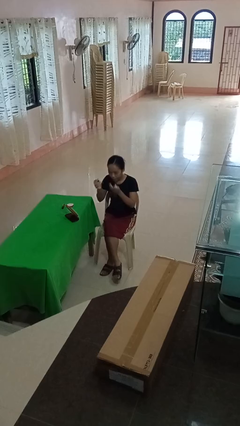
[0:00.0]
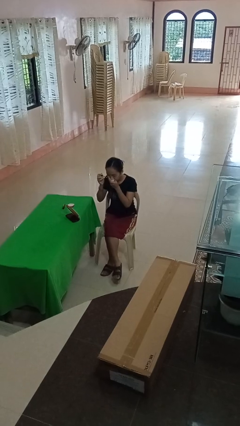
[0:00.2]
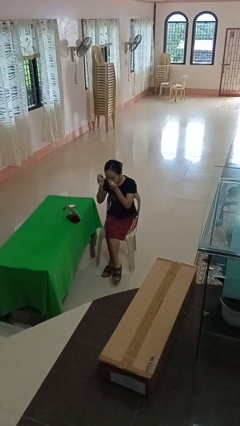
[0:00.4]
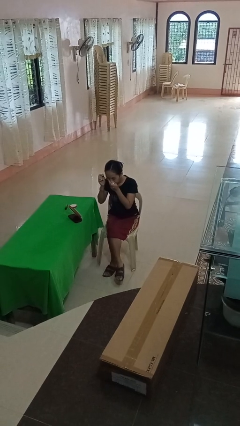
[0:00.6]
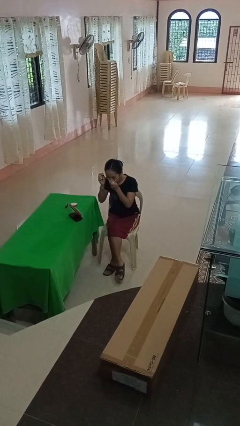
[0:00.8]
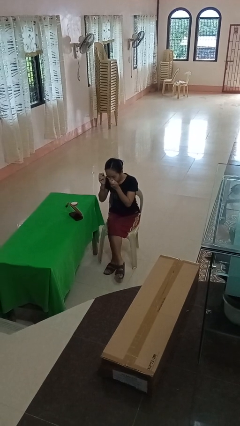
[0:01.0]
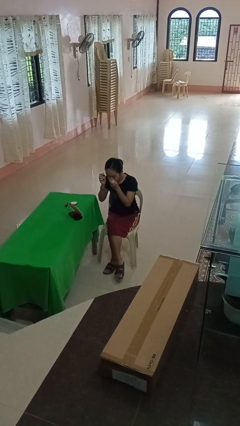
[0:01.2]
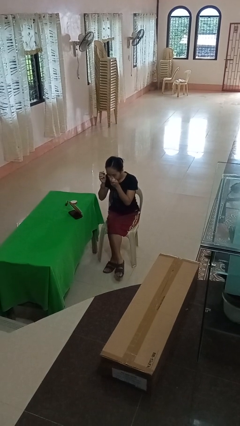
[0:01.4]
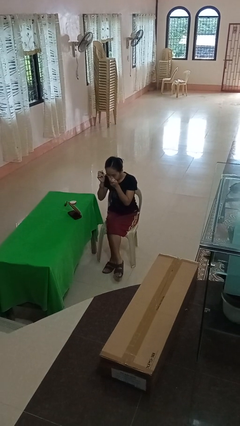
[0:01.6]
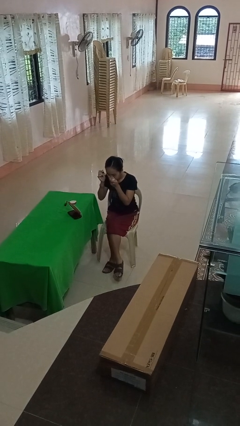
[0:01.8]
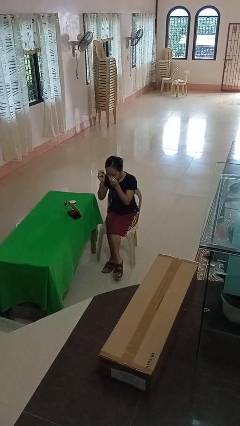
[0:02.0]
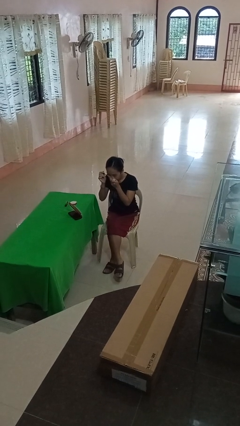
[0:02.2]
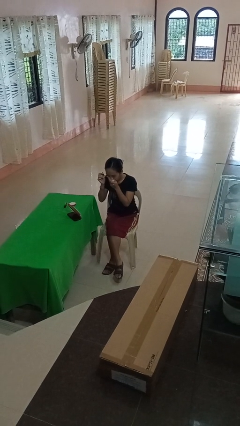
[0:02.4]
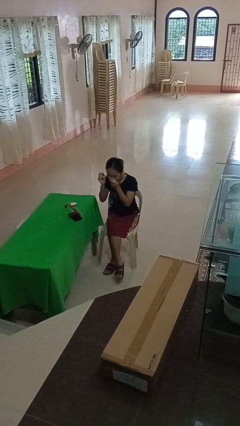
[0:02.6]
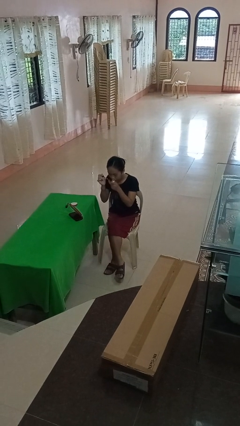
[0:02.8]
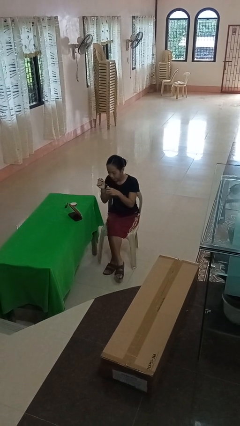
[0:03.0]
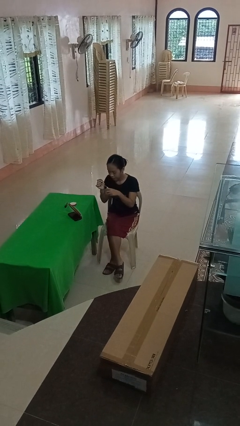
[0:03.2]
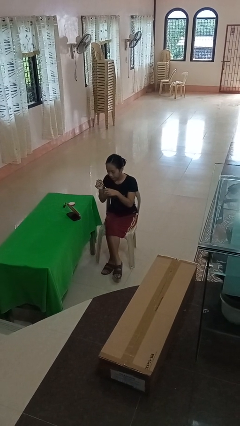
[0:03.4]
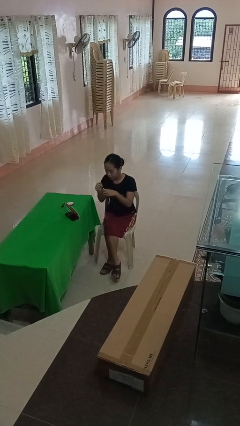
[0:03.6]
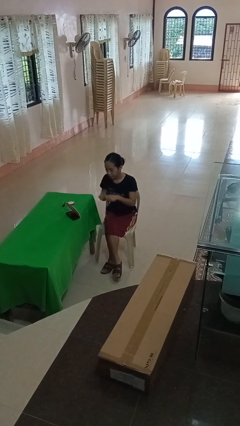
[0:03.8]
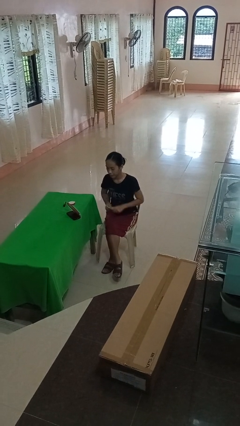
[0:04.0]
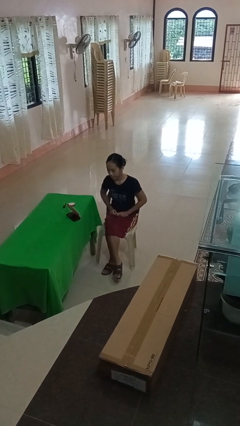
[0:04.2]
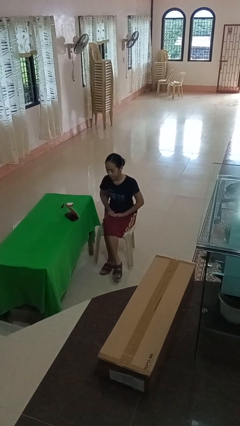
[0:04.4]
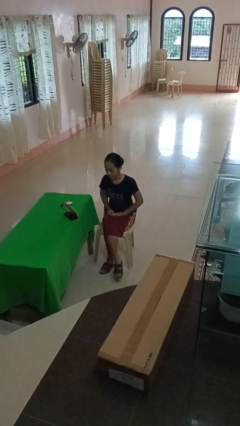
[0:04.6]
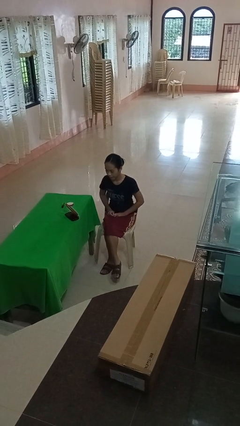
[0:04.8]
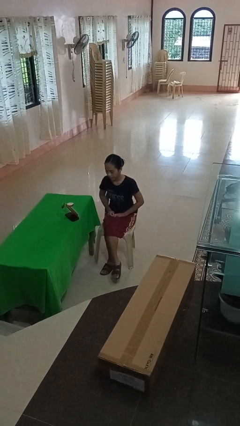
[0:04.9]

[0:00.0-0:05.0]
person applies eye makeup

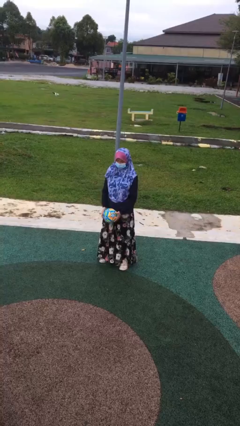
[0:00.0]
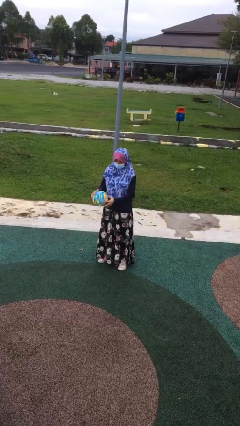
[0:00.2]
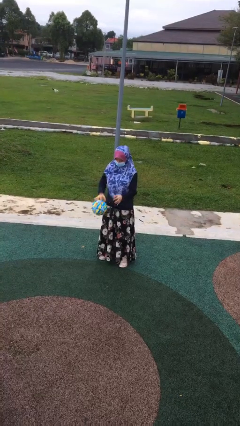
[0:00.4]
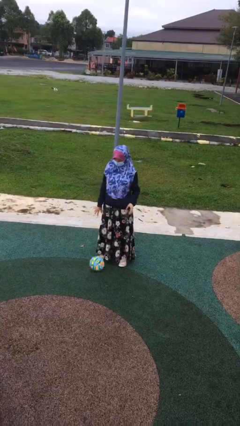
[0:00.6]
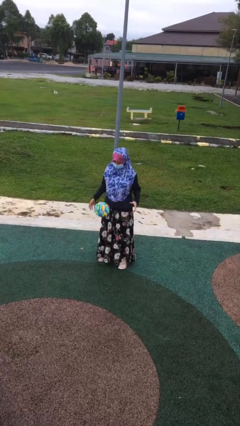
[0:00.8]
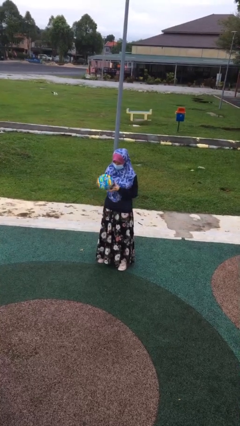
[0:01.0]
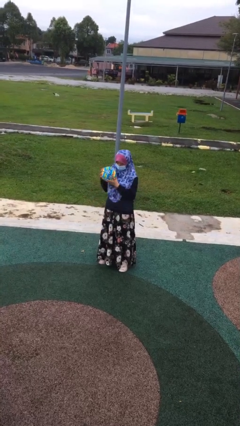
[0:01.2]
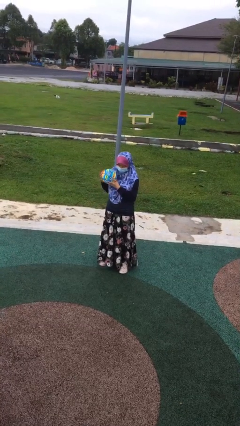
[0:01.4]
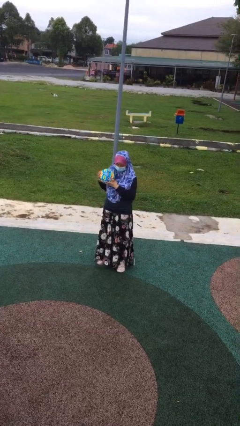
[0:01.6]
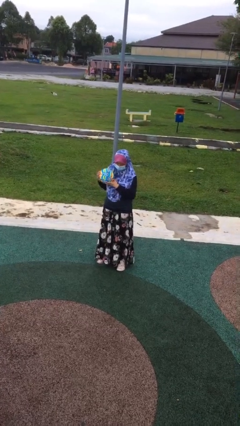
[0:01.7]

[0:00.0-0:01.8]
person bounces ball on floor

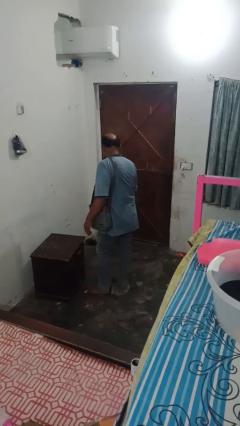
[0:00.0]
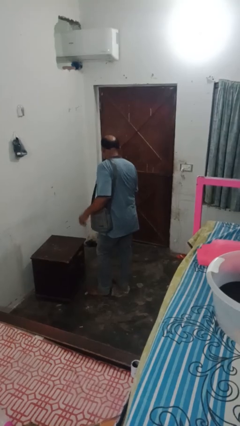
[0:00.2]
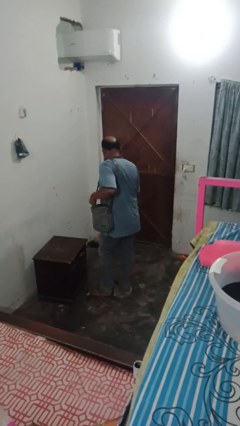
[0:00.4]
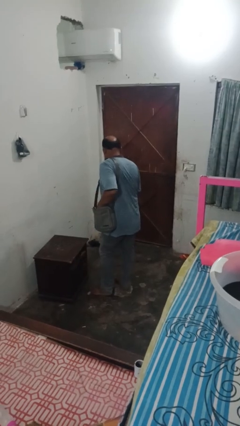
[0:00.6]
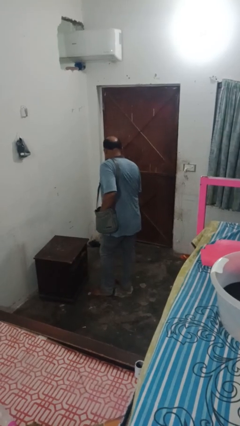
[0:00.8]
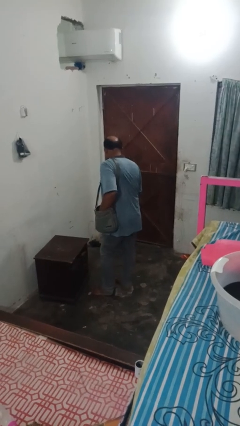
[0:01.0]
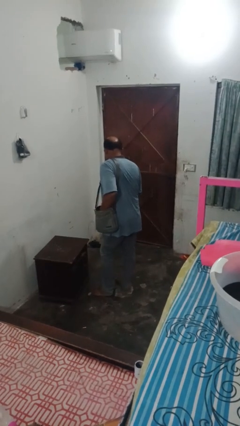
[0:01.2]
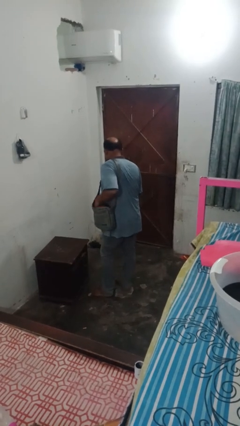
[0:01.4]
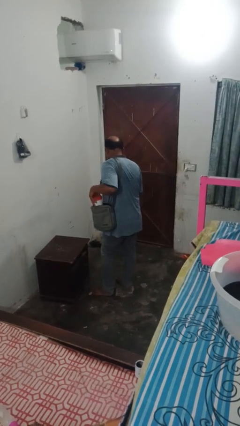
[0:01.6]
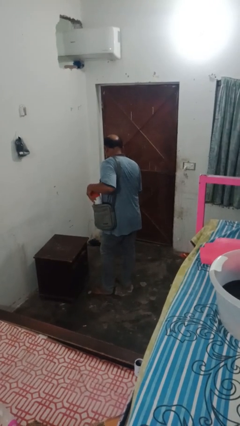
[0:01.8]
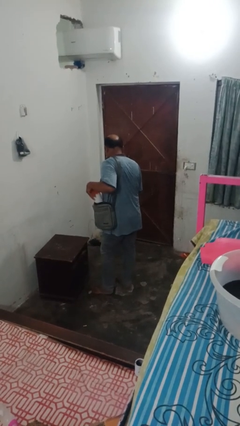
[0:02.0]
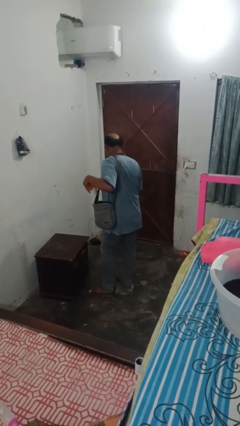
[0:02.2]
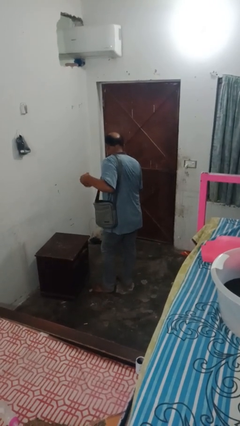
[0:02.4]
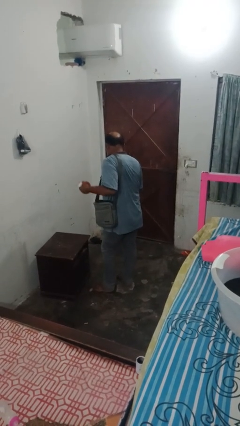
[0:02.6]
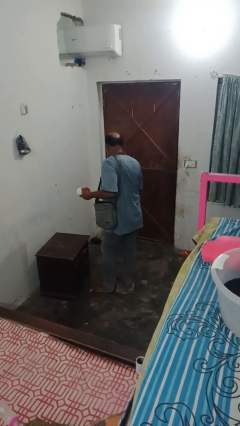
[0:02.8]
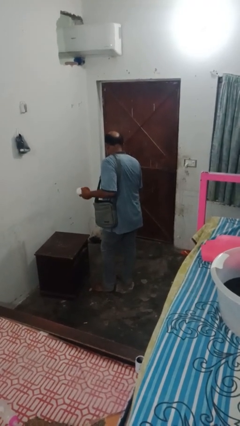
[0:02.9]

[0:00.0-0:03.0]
person takes object from bag

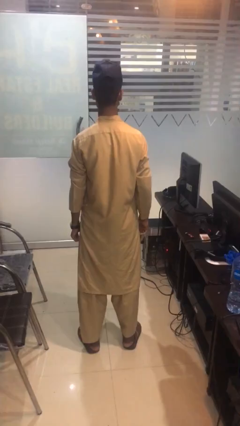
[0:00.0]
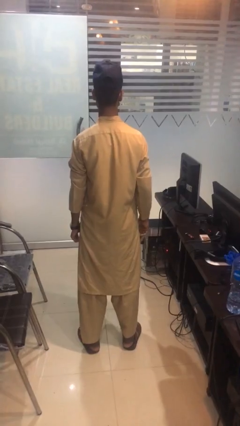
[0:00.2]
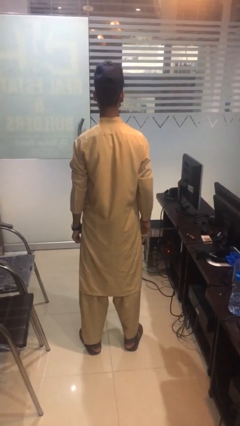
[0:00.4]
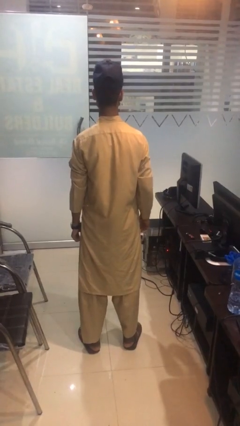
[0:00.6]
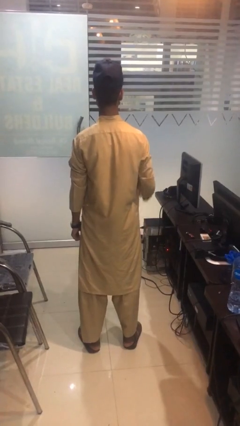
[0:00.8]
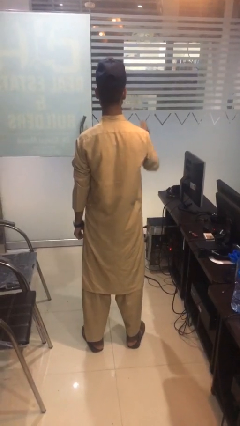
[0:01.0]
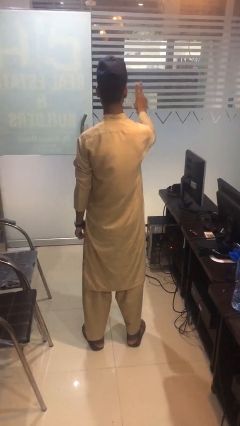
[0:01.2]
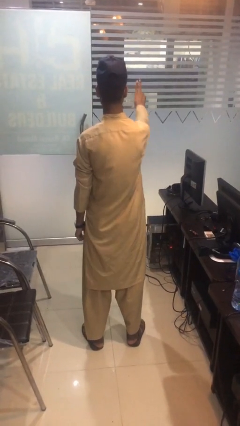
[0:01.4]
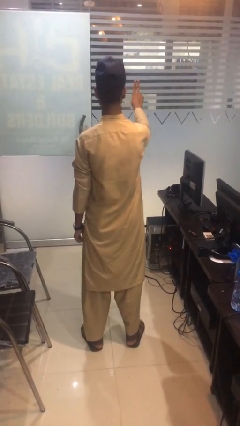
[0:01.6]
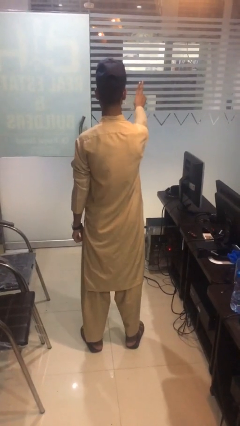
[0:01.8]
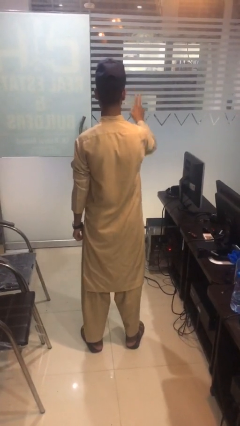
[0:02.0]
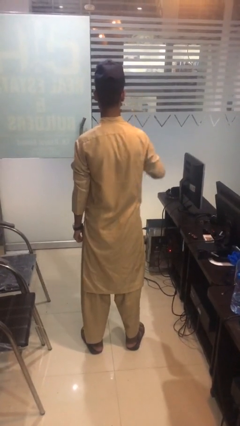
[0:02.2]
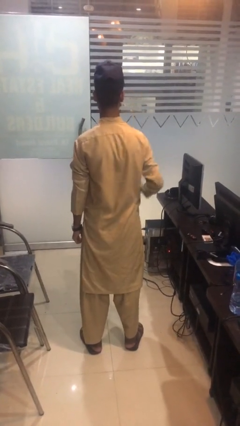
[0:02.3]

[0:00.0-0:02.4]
person gestures peace

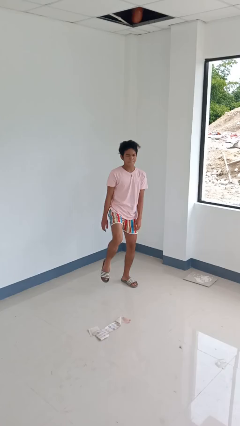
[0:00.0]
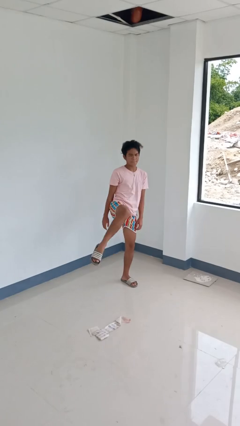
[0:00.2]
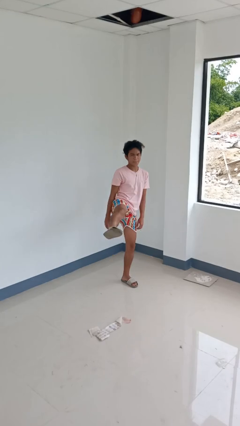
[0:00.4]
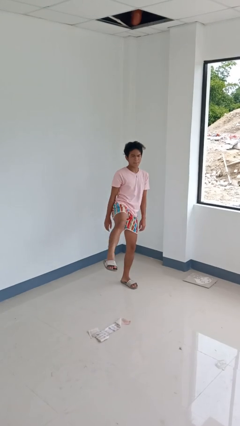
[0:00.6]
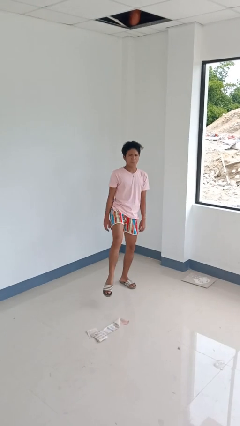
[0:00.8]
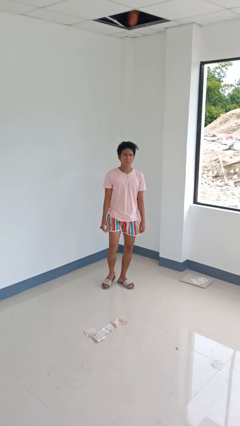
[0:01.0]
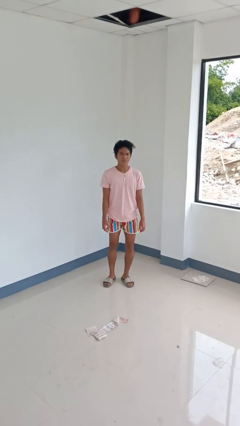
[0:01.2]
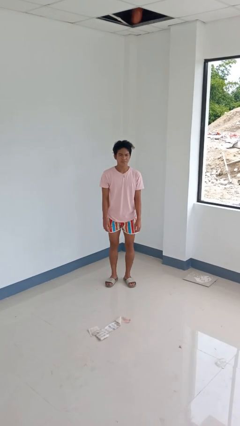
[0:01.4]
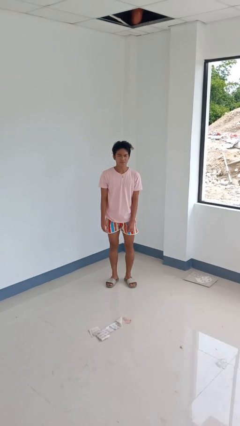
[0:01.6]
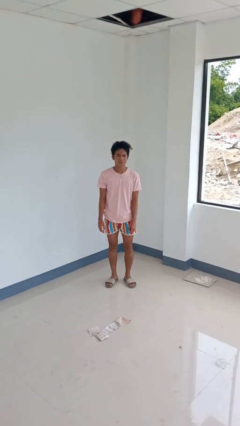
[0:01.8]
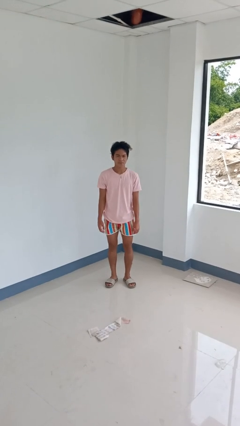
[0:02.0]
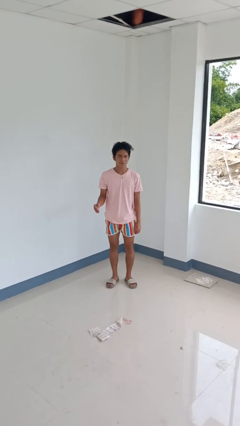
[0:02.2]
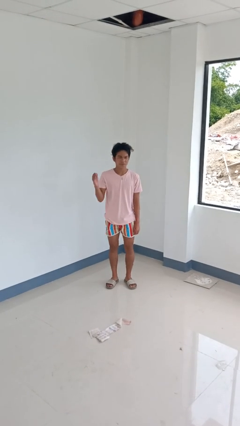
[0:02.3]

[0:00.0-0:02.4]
person karate kicks

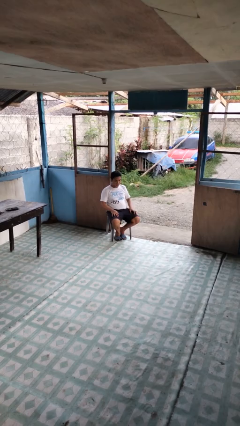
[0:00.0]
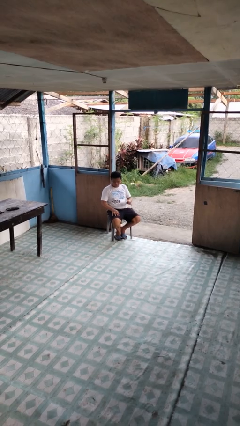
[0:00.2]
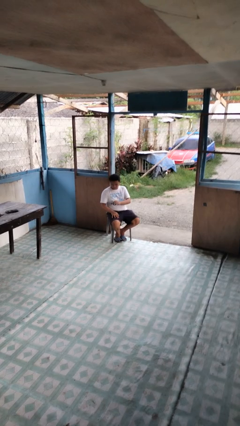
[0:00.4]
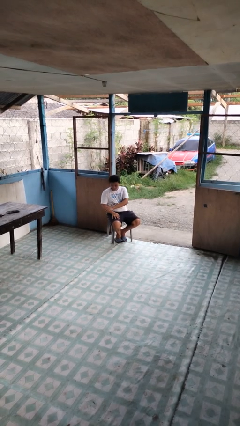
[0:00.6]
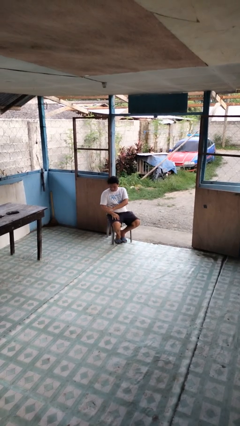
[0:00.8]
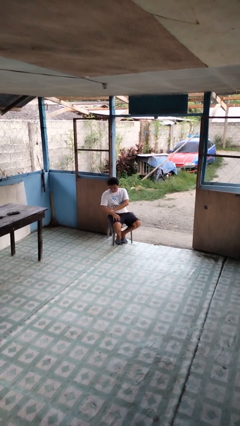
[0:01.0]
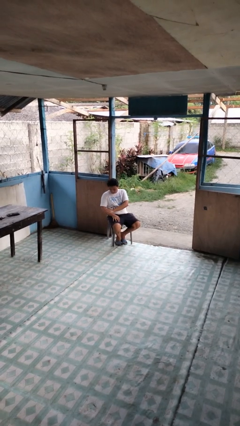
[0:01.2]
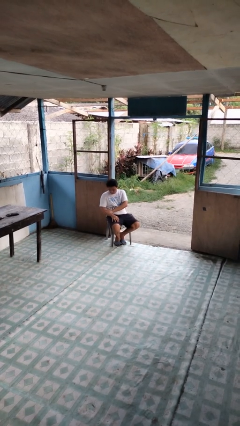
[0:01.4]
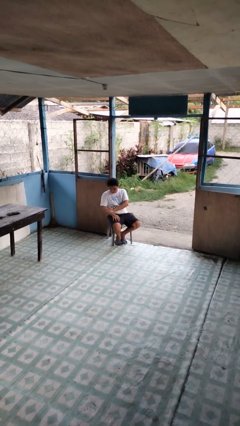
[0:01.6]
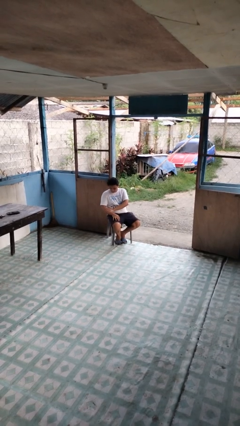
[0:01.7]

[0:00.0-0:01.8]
person swats bug

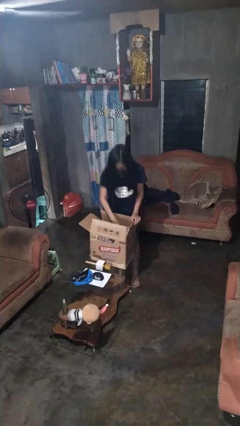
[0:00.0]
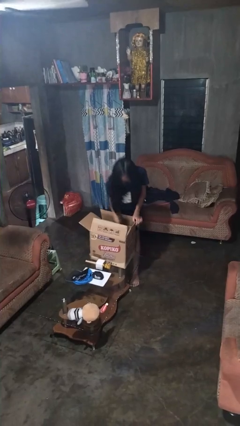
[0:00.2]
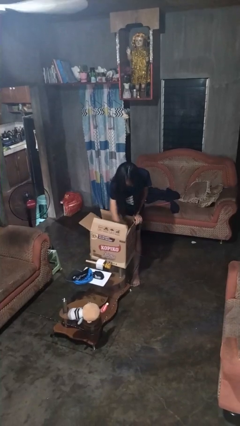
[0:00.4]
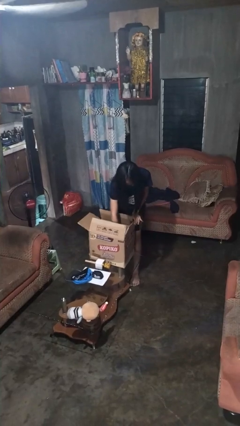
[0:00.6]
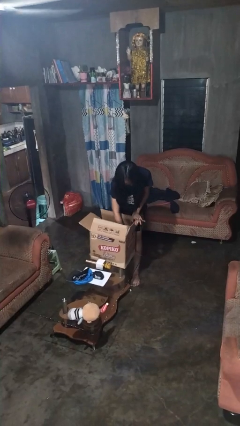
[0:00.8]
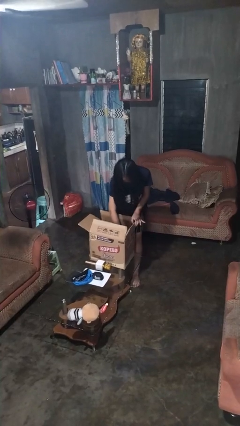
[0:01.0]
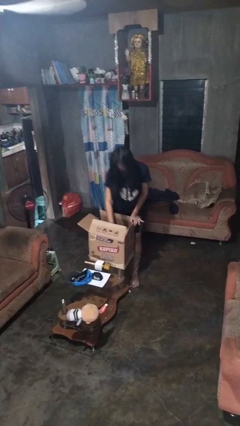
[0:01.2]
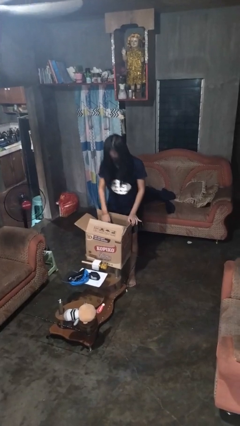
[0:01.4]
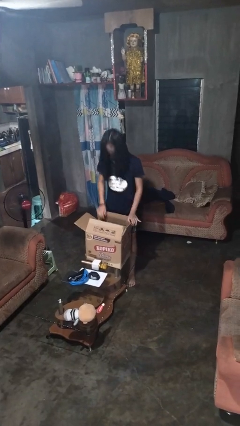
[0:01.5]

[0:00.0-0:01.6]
person searches in box
